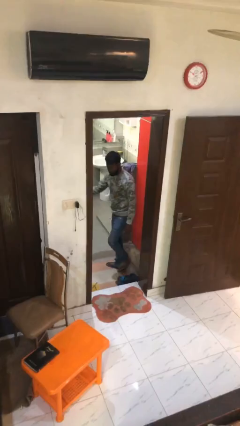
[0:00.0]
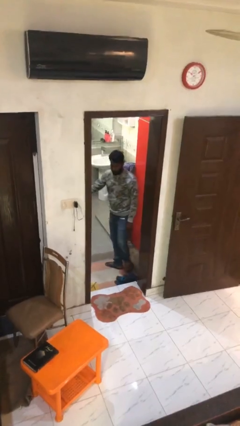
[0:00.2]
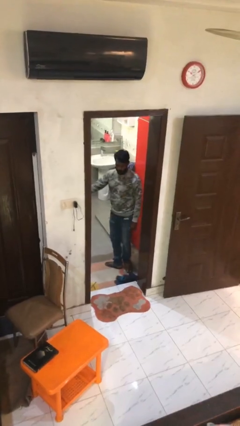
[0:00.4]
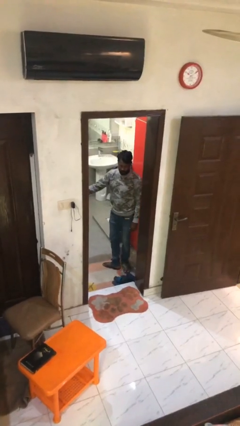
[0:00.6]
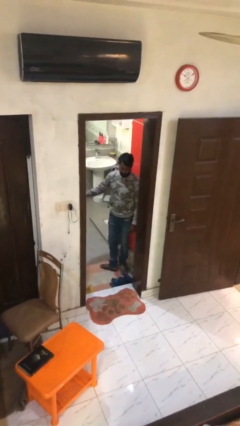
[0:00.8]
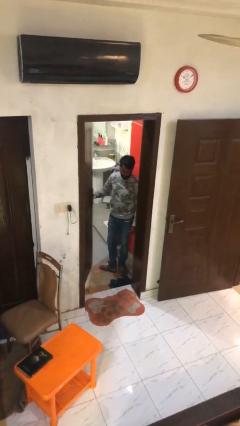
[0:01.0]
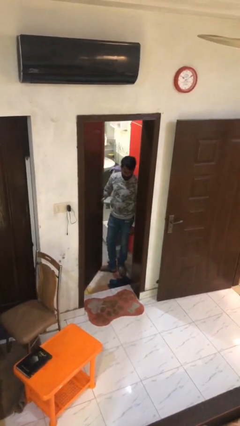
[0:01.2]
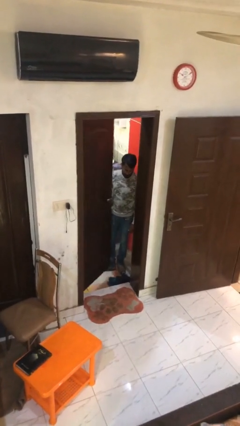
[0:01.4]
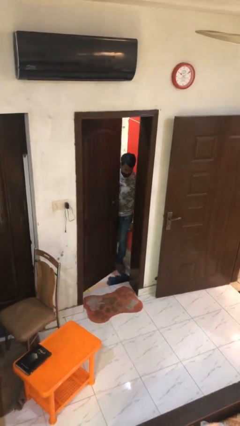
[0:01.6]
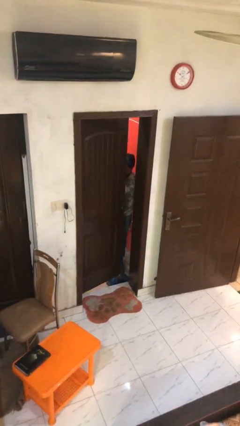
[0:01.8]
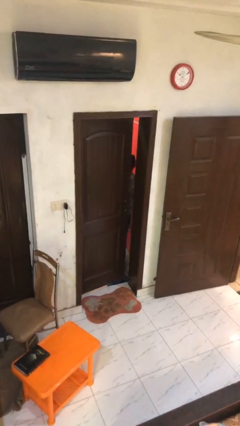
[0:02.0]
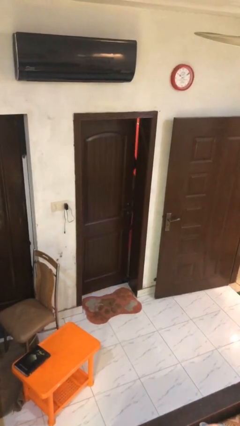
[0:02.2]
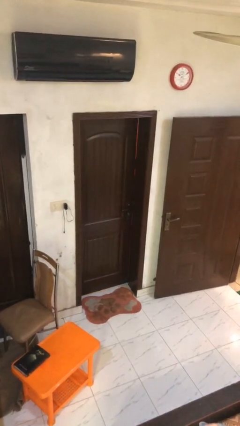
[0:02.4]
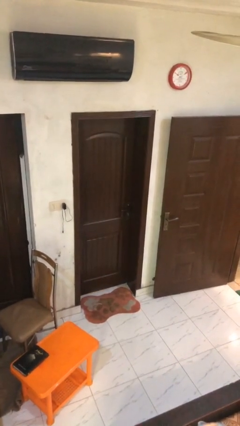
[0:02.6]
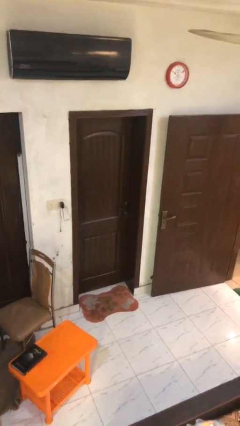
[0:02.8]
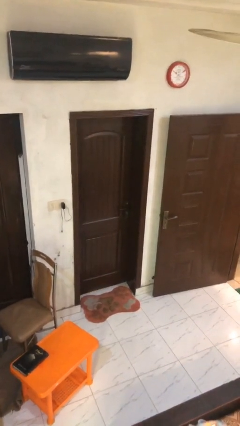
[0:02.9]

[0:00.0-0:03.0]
person closes facility door

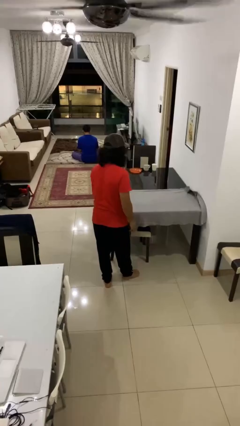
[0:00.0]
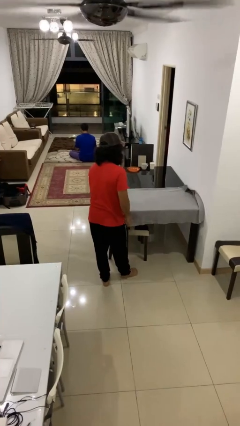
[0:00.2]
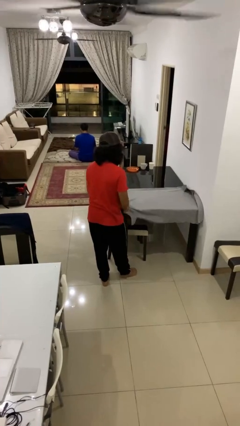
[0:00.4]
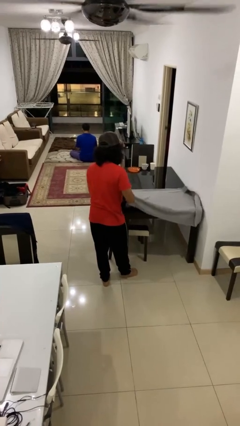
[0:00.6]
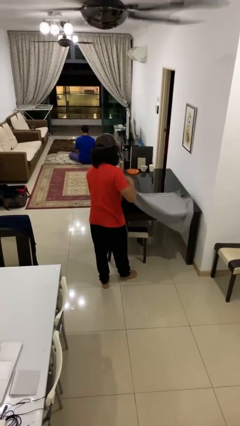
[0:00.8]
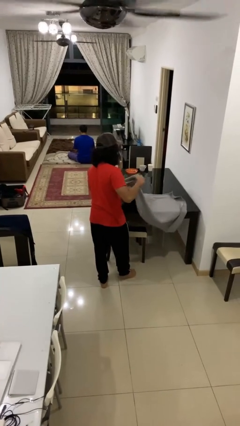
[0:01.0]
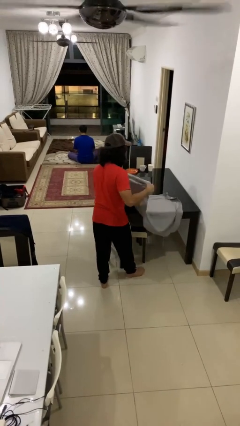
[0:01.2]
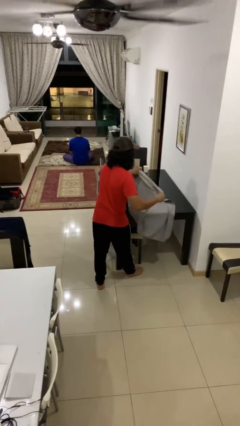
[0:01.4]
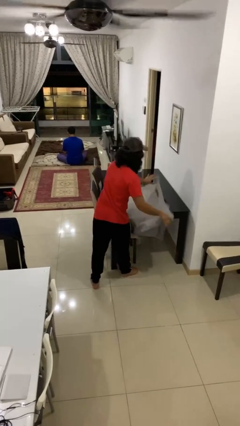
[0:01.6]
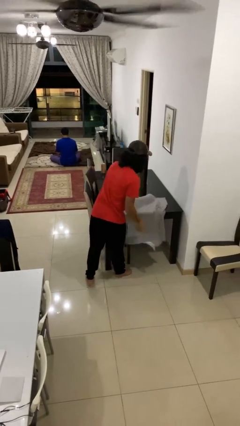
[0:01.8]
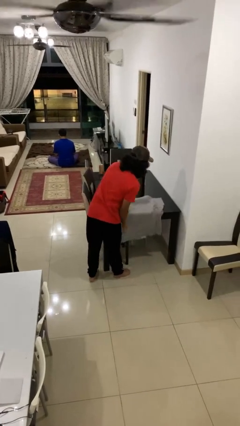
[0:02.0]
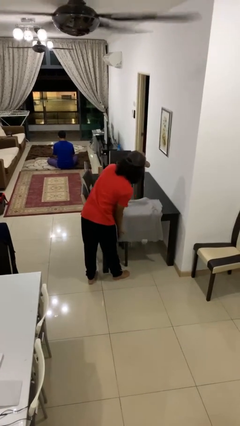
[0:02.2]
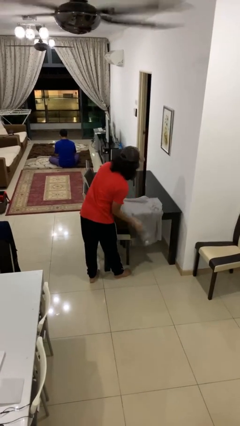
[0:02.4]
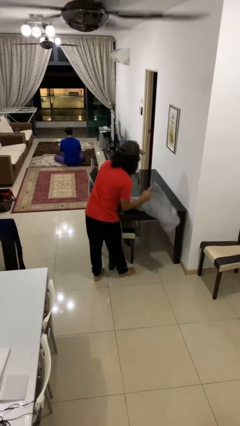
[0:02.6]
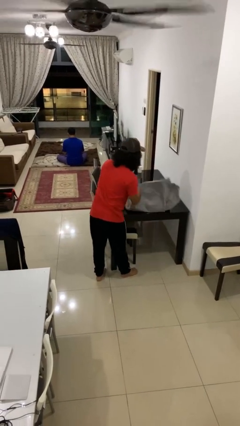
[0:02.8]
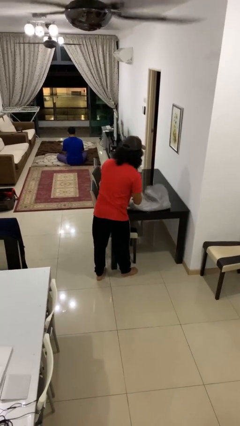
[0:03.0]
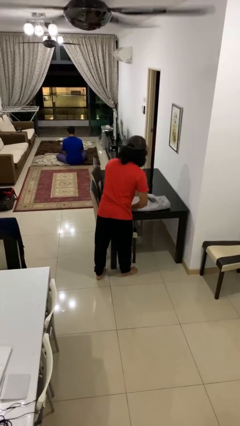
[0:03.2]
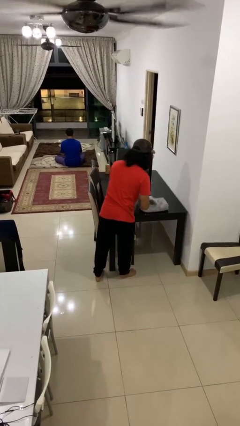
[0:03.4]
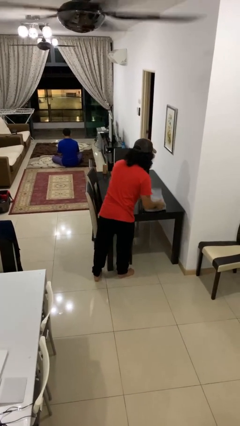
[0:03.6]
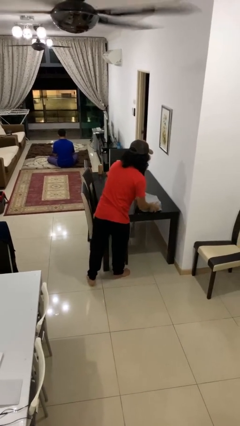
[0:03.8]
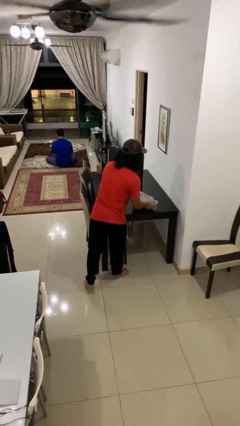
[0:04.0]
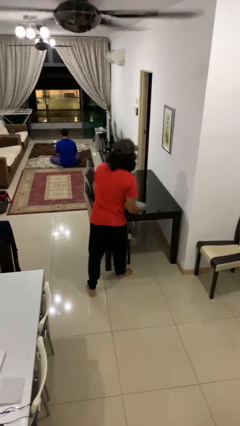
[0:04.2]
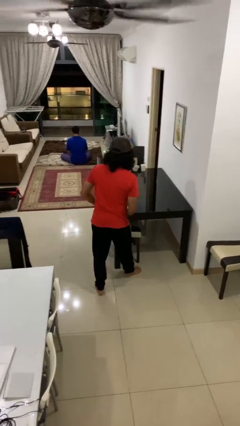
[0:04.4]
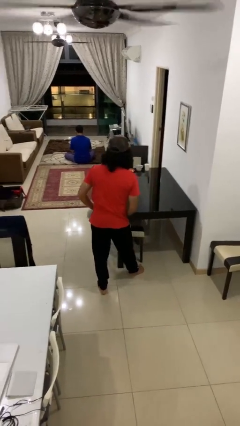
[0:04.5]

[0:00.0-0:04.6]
person folds tablecloth

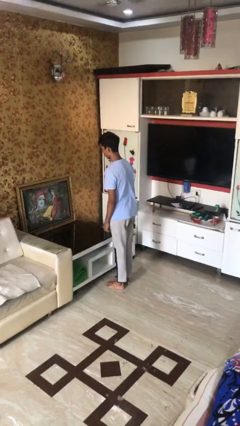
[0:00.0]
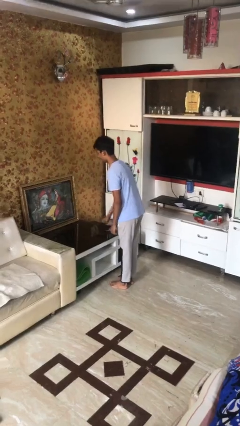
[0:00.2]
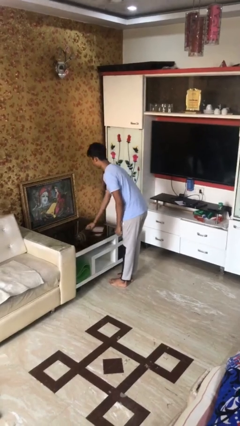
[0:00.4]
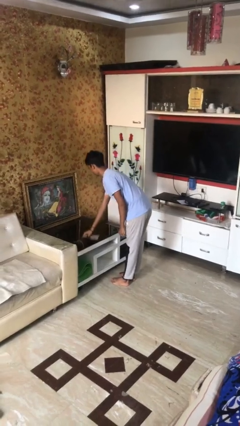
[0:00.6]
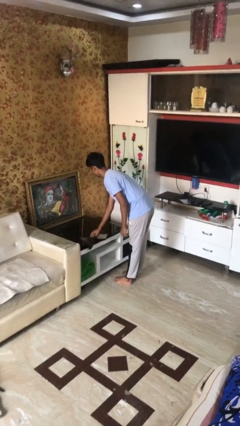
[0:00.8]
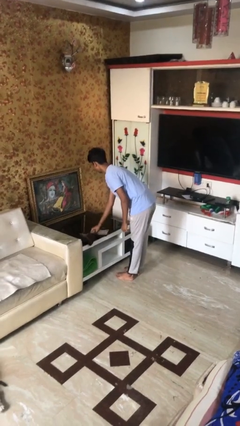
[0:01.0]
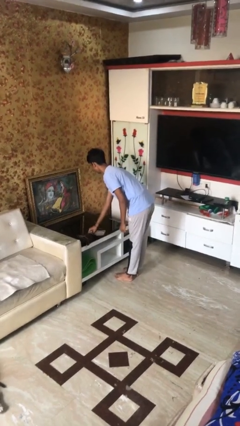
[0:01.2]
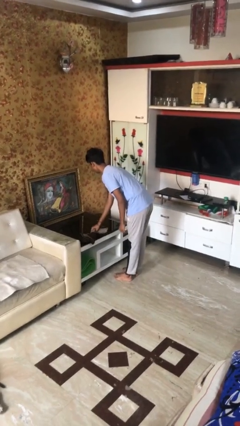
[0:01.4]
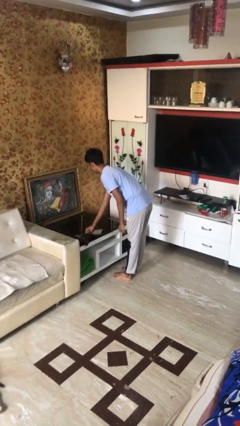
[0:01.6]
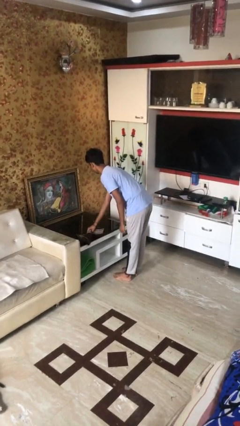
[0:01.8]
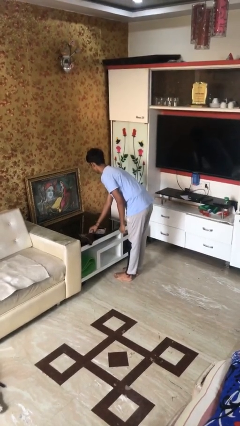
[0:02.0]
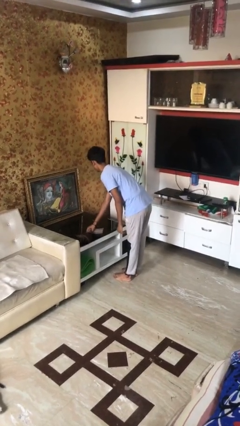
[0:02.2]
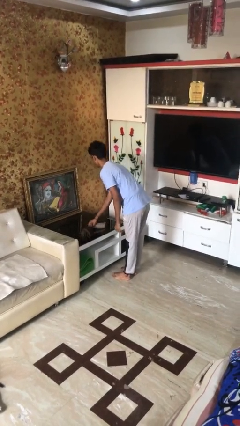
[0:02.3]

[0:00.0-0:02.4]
person cleans table with rag

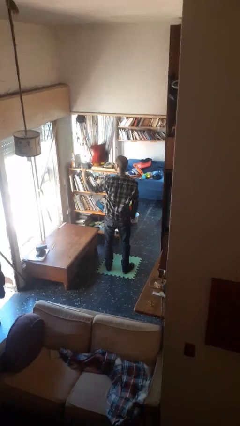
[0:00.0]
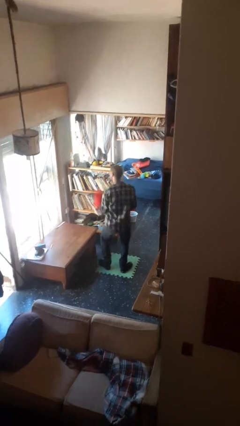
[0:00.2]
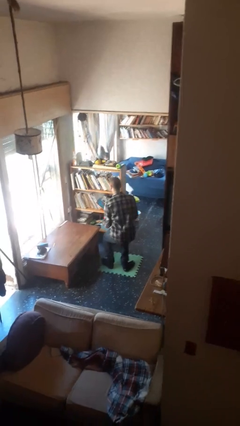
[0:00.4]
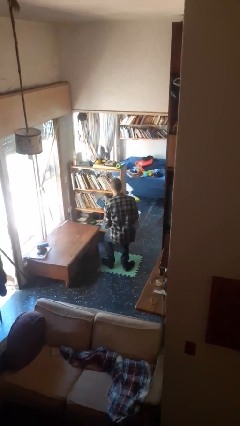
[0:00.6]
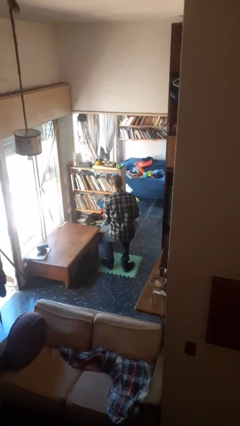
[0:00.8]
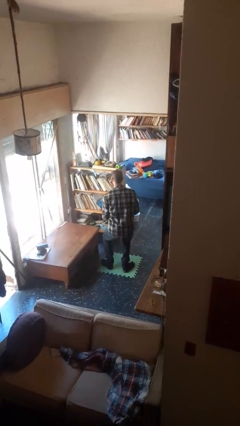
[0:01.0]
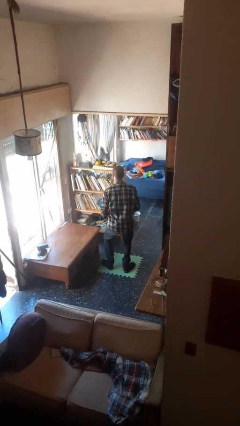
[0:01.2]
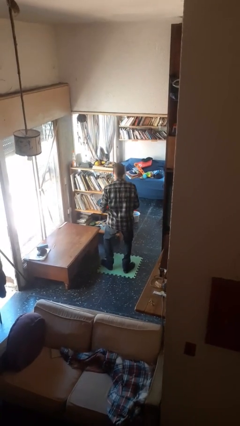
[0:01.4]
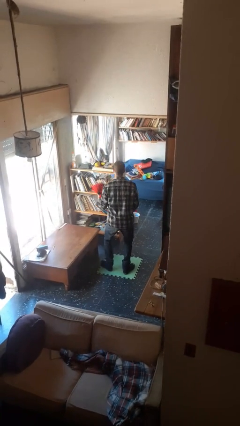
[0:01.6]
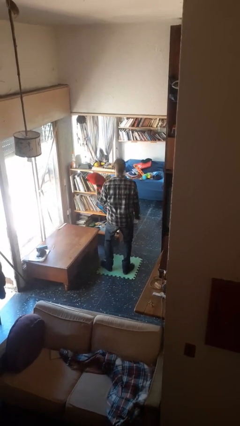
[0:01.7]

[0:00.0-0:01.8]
person catches dropped object

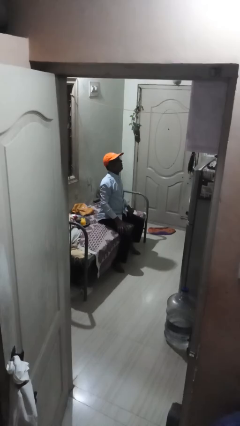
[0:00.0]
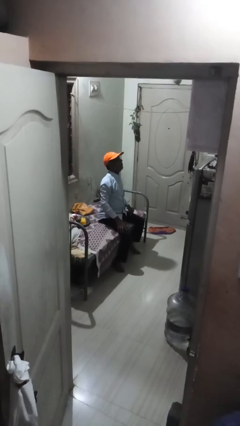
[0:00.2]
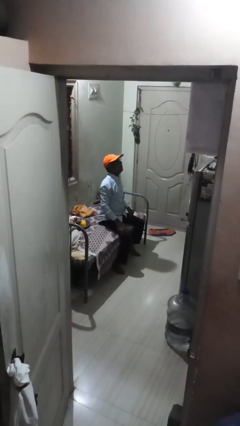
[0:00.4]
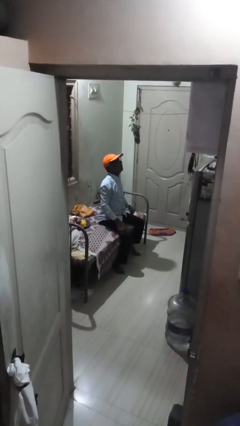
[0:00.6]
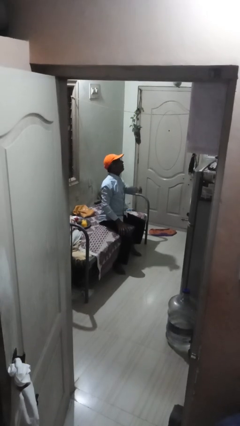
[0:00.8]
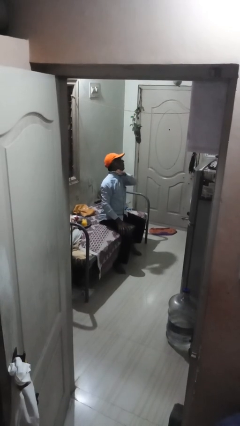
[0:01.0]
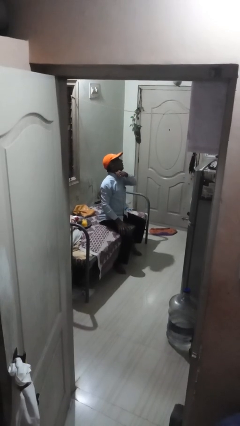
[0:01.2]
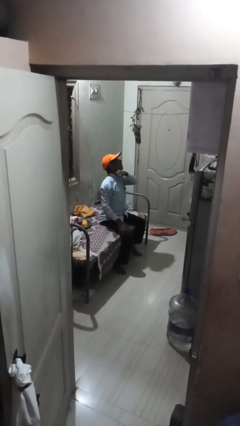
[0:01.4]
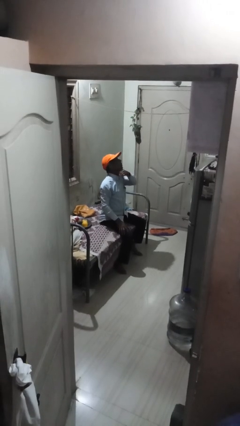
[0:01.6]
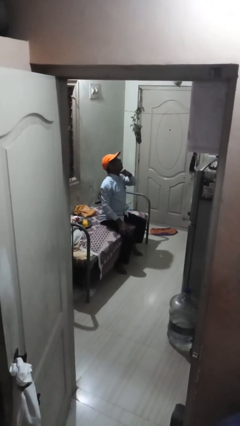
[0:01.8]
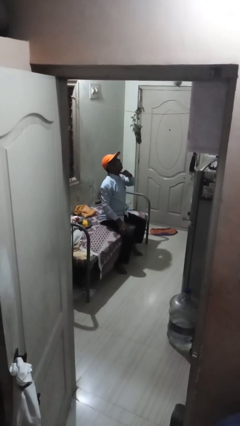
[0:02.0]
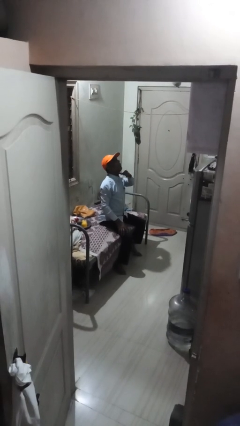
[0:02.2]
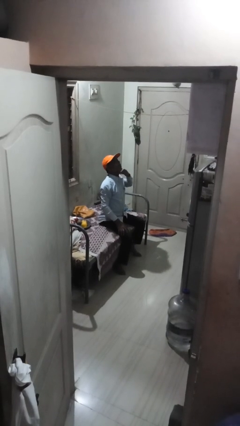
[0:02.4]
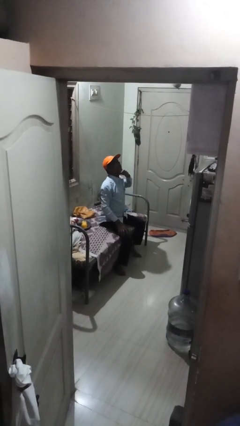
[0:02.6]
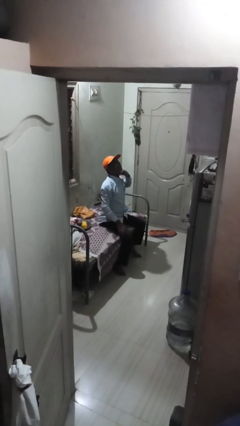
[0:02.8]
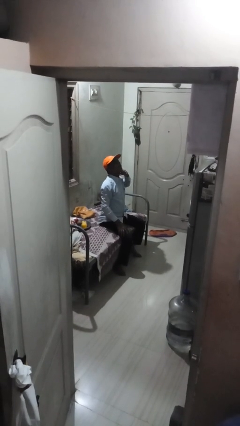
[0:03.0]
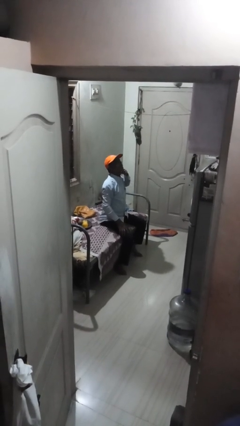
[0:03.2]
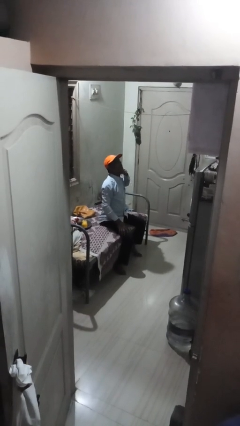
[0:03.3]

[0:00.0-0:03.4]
person gestures cut

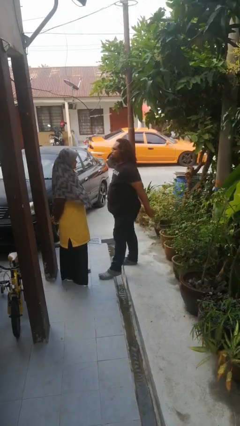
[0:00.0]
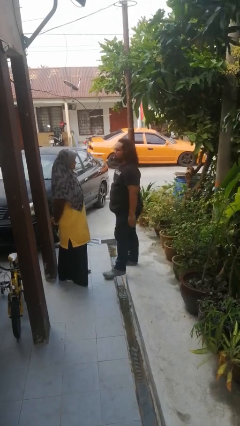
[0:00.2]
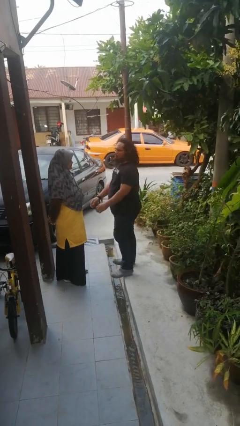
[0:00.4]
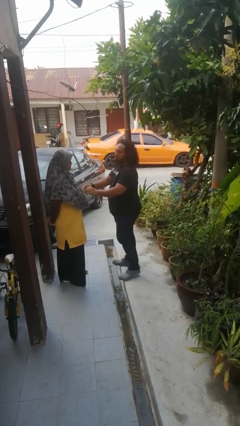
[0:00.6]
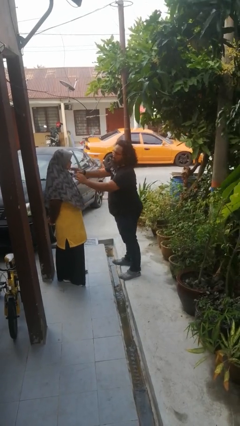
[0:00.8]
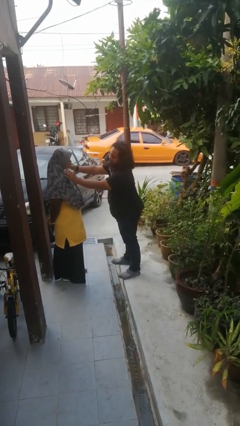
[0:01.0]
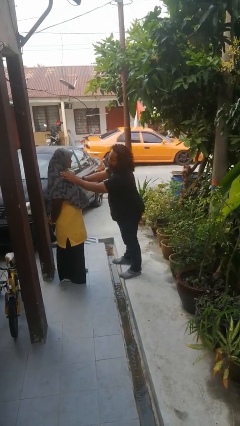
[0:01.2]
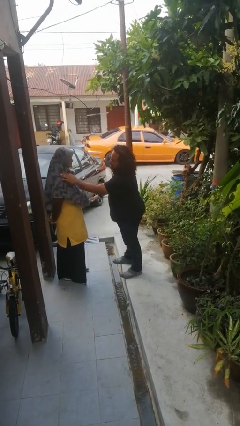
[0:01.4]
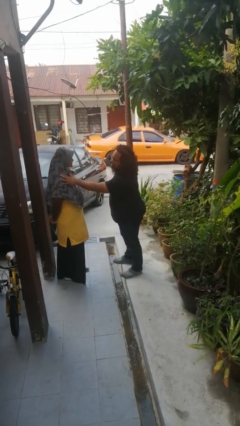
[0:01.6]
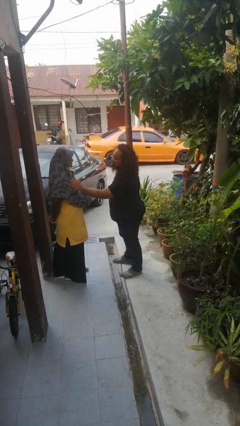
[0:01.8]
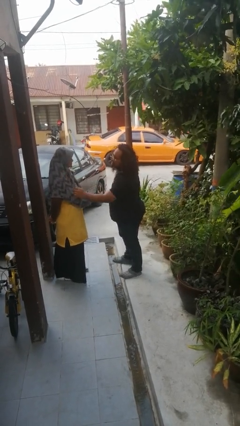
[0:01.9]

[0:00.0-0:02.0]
person pounds shoulders of person
